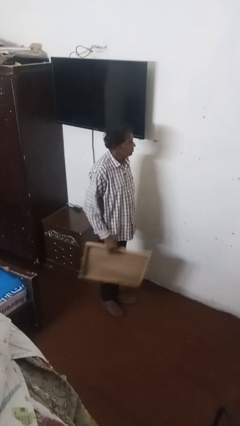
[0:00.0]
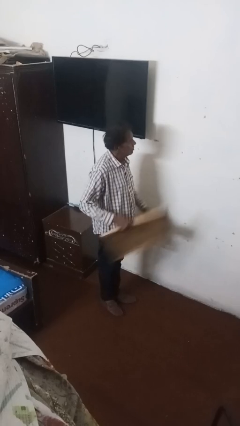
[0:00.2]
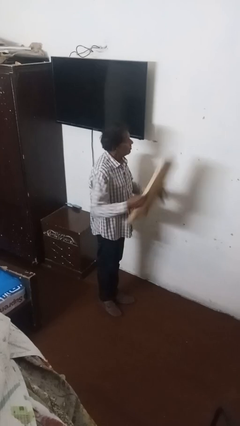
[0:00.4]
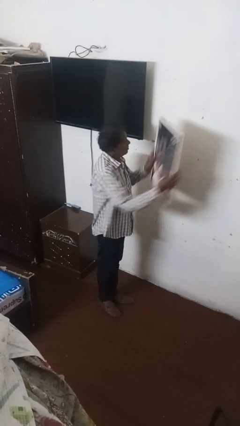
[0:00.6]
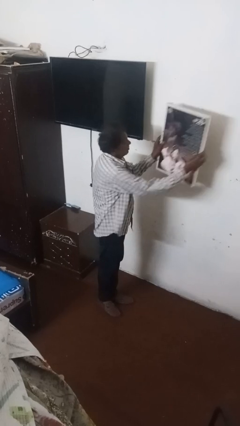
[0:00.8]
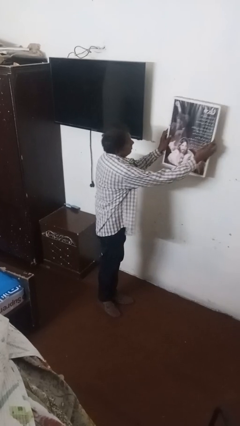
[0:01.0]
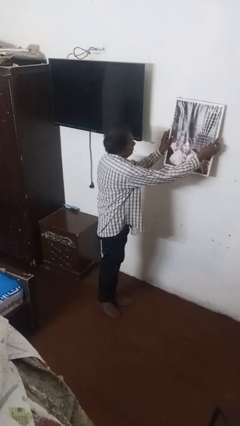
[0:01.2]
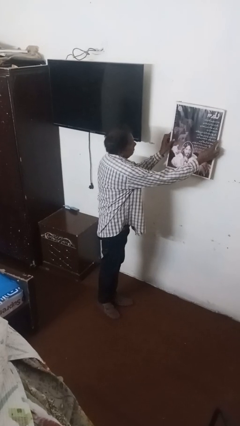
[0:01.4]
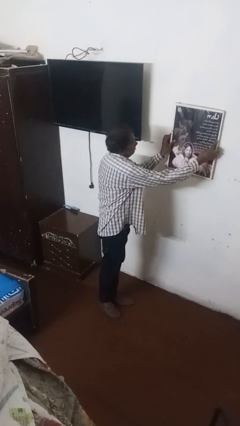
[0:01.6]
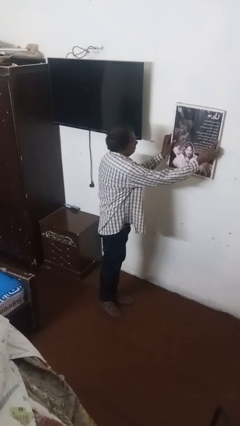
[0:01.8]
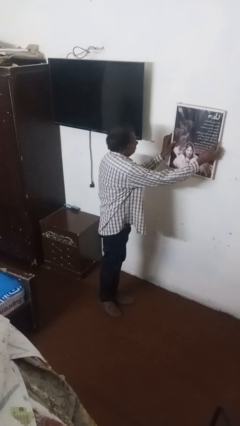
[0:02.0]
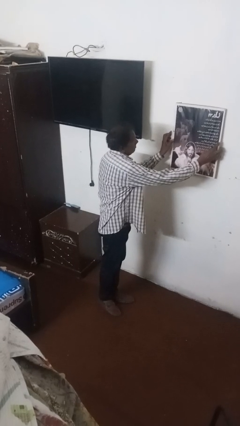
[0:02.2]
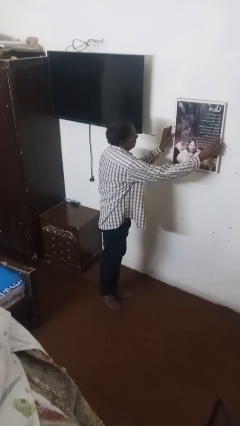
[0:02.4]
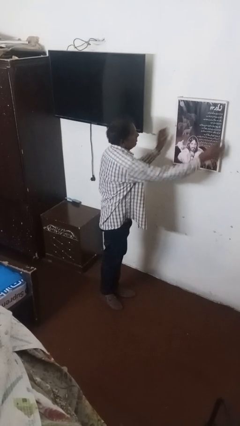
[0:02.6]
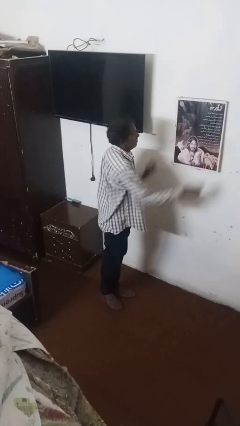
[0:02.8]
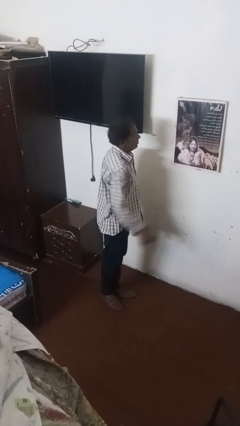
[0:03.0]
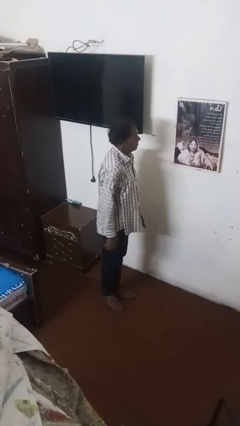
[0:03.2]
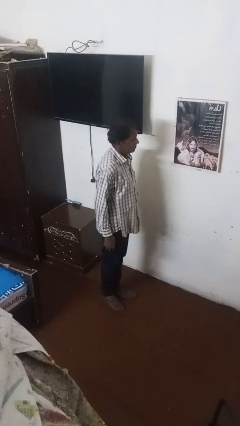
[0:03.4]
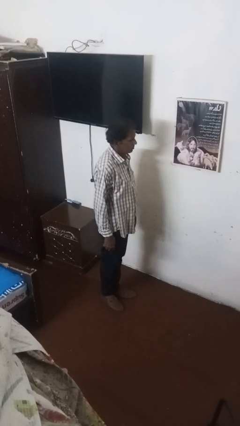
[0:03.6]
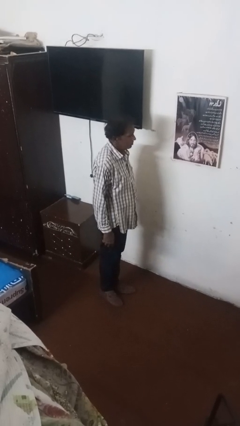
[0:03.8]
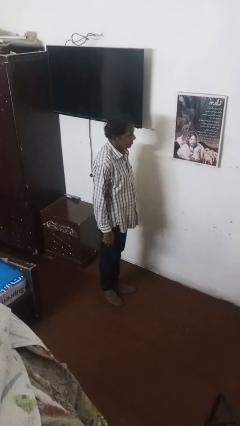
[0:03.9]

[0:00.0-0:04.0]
person puts up picture frame

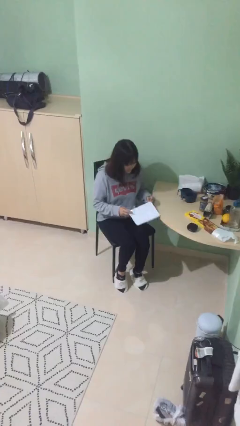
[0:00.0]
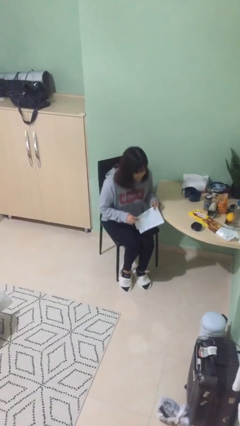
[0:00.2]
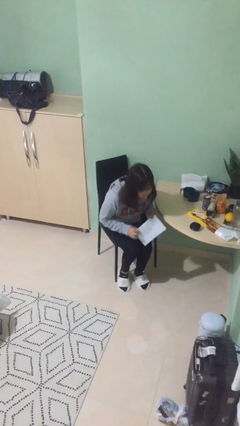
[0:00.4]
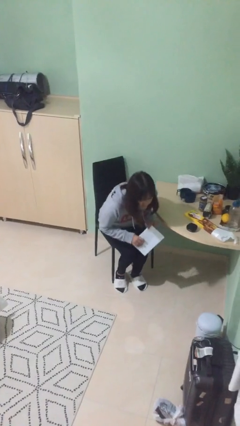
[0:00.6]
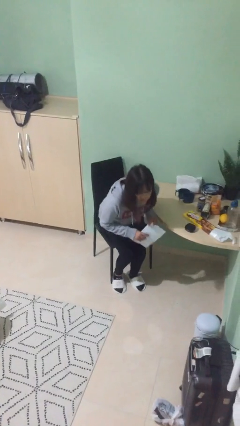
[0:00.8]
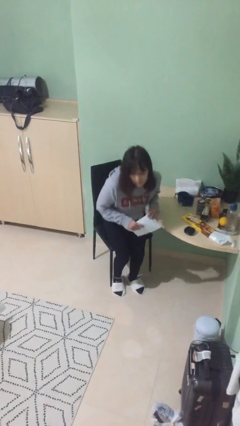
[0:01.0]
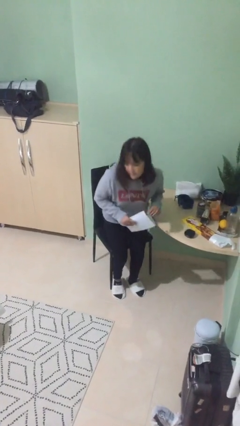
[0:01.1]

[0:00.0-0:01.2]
person stands up

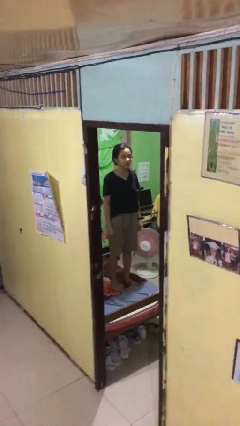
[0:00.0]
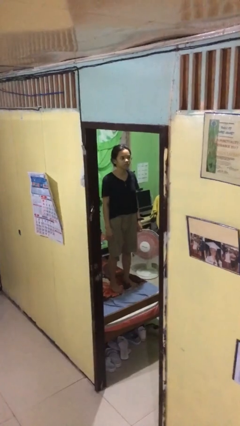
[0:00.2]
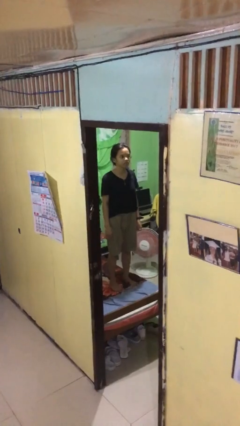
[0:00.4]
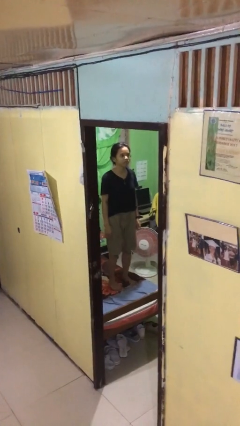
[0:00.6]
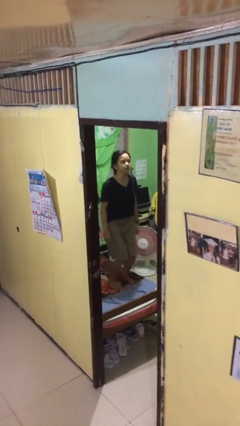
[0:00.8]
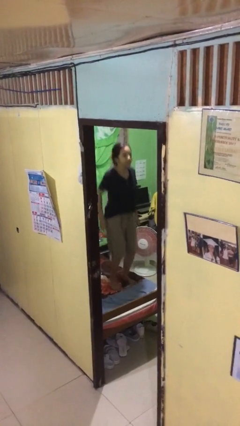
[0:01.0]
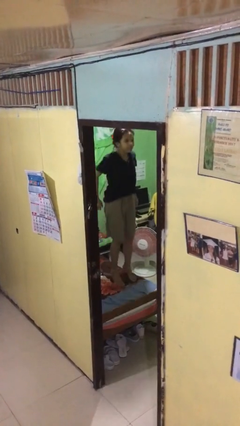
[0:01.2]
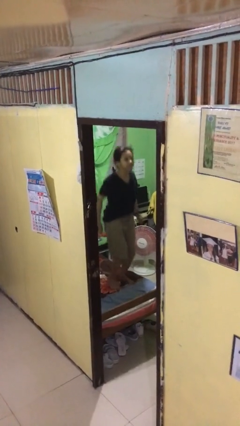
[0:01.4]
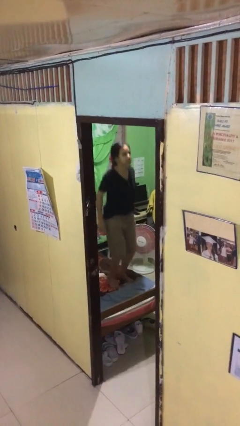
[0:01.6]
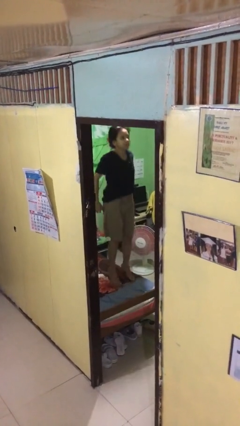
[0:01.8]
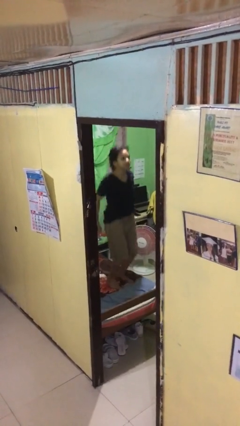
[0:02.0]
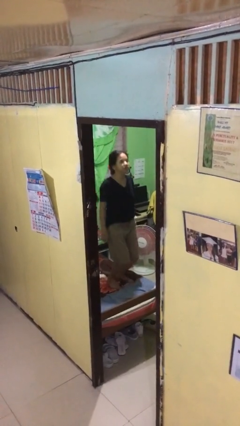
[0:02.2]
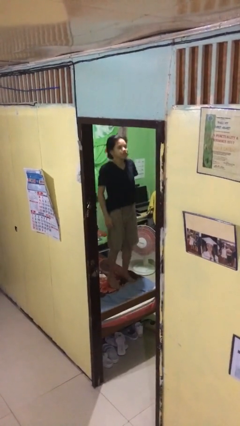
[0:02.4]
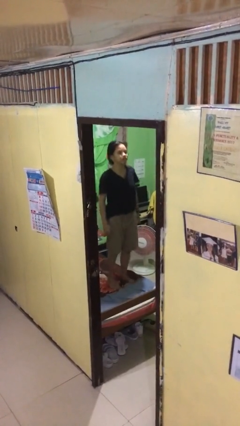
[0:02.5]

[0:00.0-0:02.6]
person jumps on bed

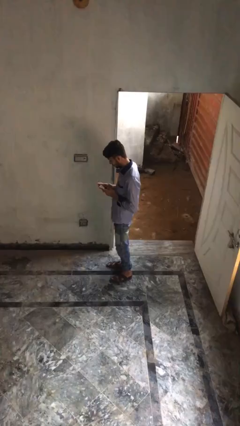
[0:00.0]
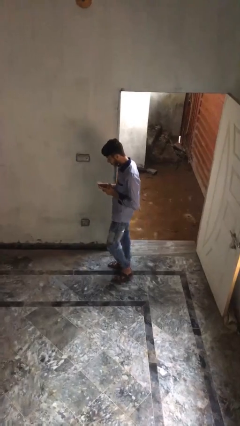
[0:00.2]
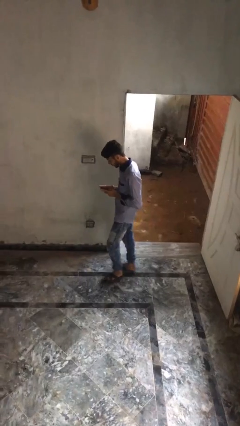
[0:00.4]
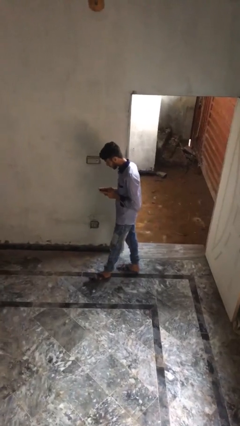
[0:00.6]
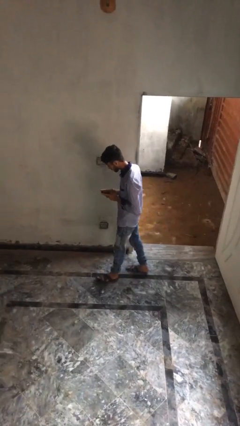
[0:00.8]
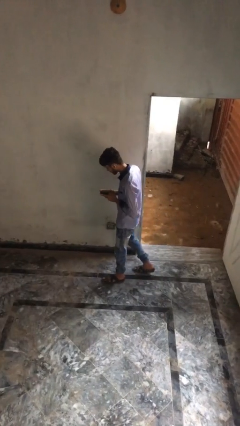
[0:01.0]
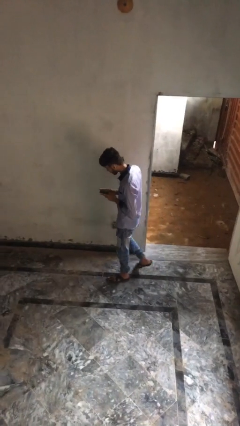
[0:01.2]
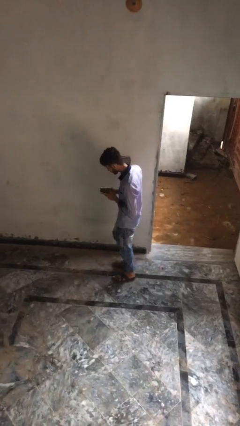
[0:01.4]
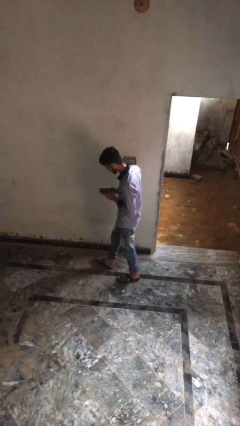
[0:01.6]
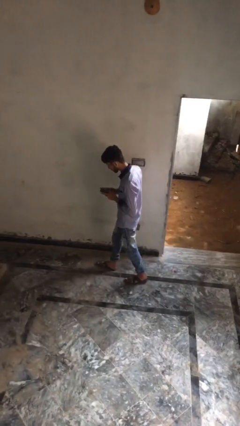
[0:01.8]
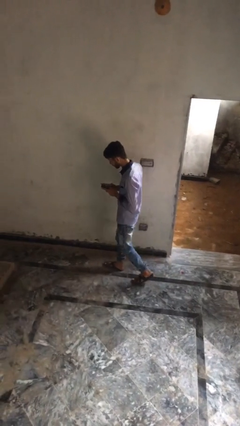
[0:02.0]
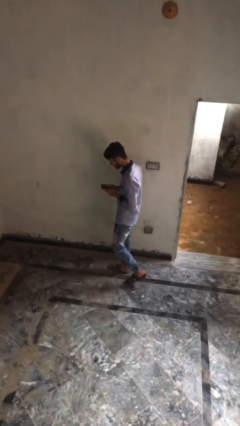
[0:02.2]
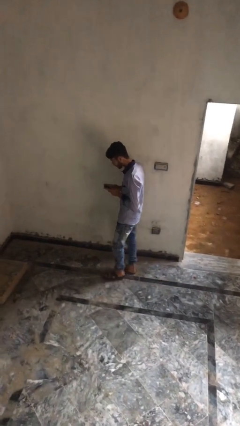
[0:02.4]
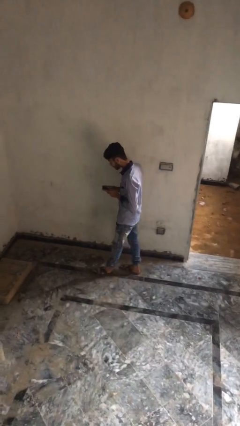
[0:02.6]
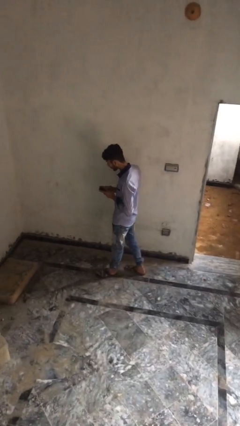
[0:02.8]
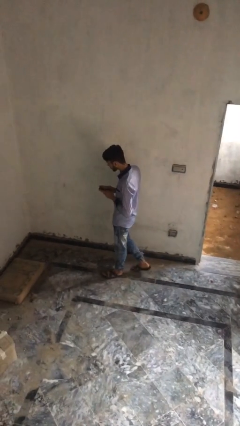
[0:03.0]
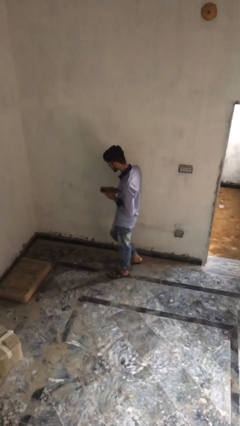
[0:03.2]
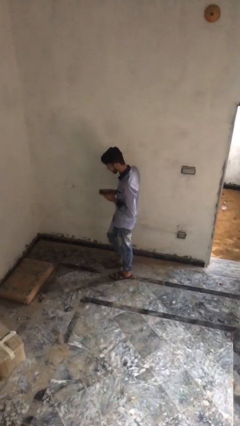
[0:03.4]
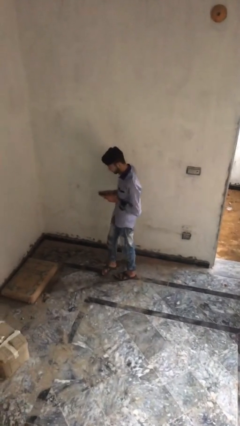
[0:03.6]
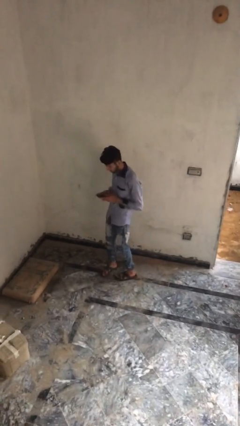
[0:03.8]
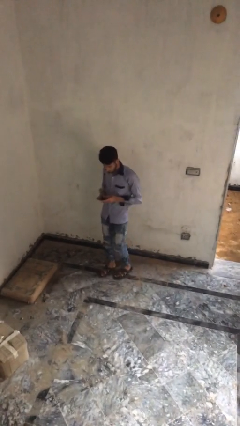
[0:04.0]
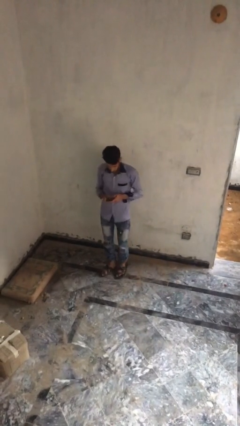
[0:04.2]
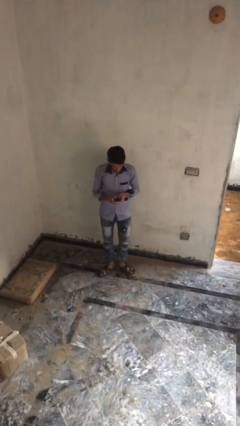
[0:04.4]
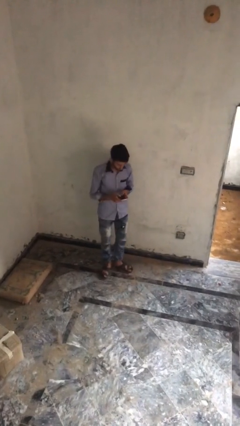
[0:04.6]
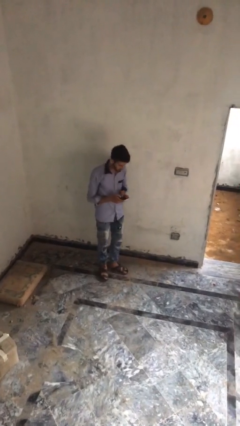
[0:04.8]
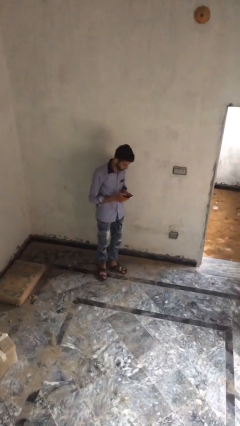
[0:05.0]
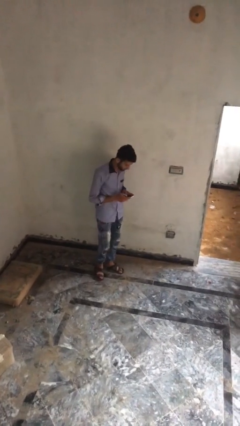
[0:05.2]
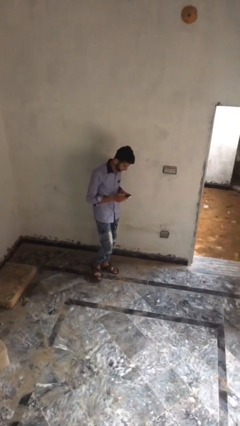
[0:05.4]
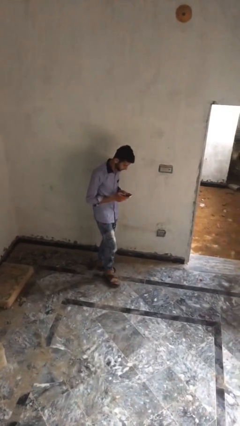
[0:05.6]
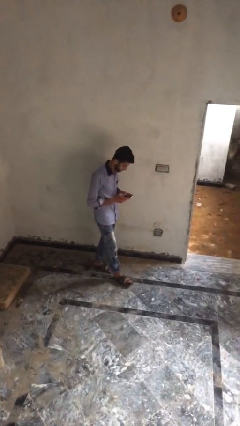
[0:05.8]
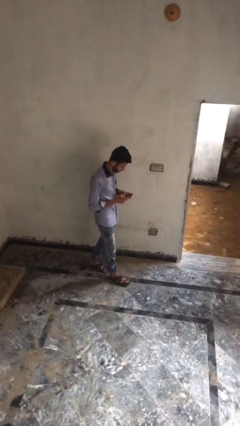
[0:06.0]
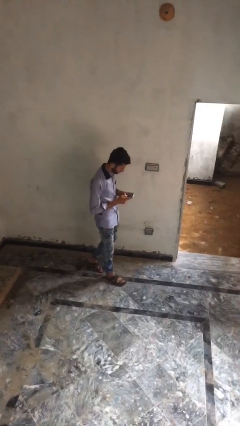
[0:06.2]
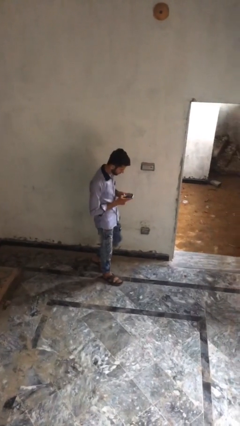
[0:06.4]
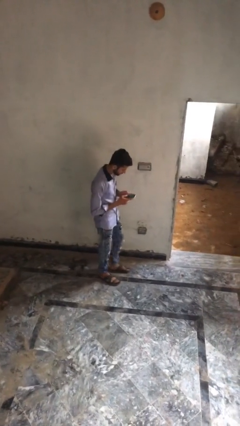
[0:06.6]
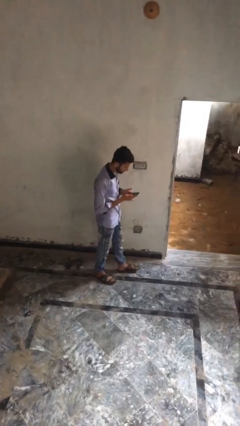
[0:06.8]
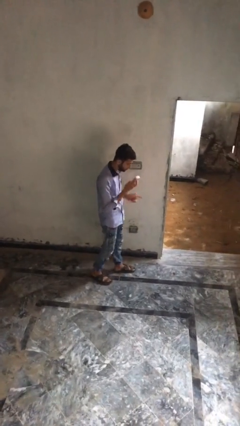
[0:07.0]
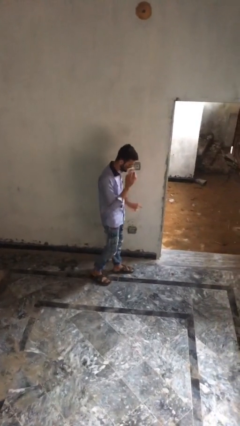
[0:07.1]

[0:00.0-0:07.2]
person texts on phone

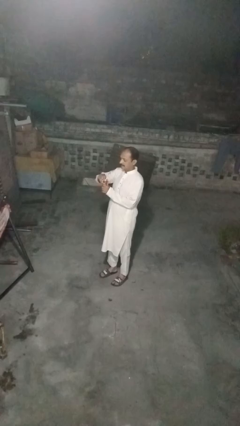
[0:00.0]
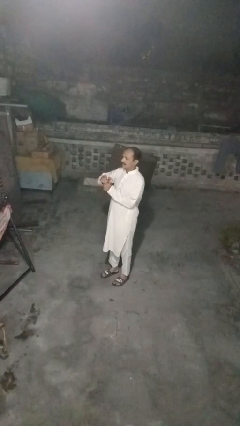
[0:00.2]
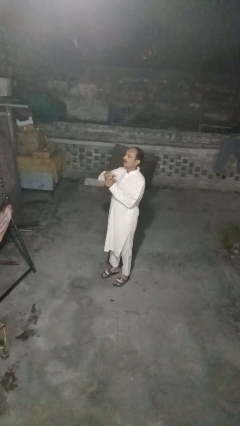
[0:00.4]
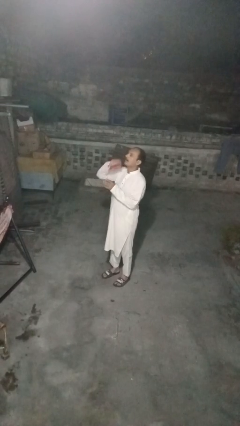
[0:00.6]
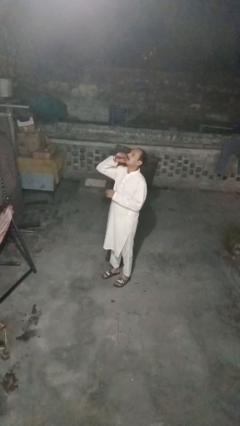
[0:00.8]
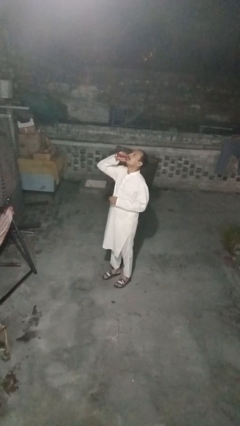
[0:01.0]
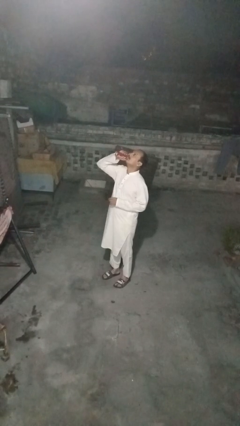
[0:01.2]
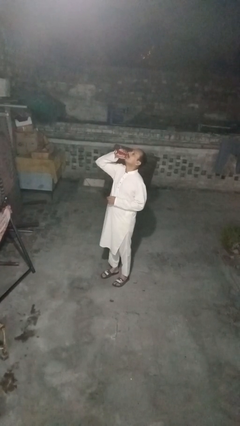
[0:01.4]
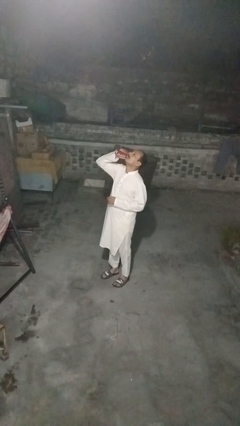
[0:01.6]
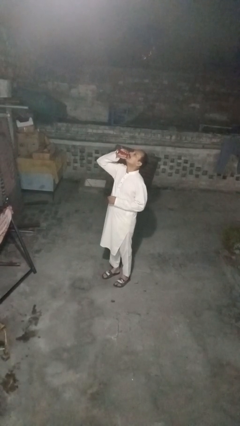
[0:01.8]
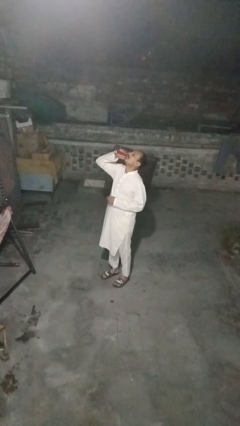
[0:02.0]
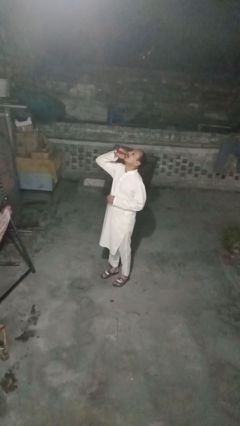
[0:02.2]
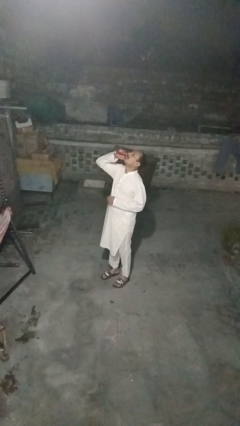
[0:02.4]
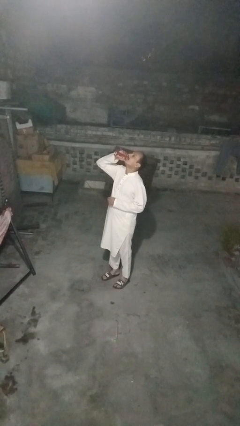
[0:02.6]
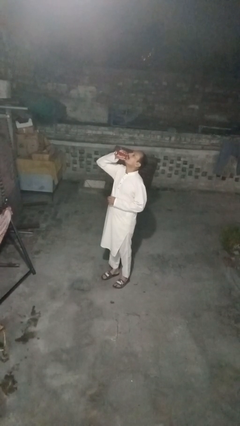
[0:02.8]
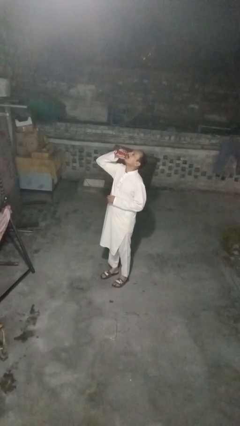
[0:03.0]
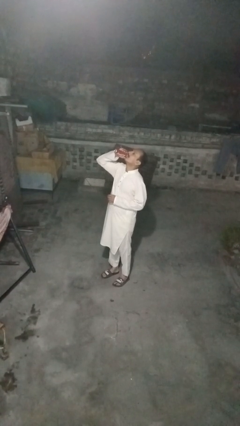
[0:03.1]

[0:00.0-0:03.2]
person drinks from beverage can
